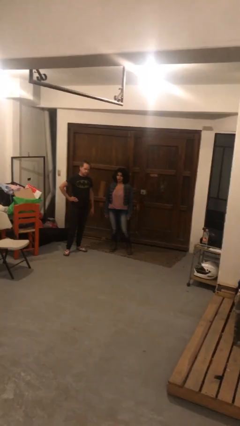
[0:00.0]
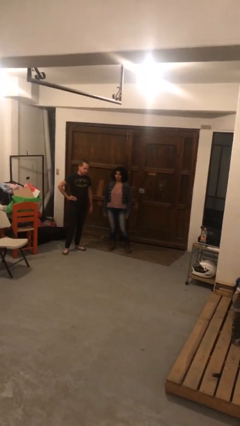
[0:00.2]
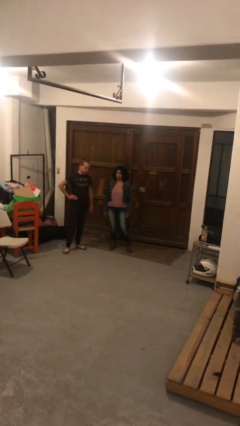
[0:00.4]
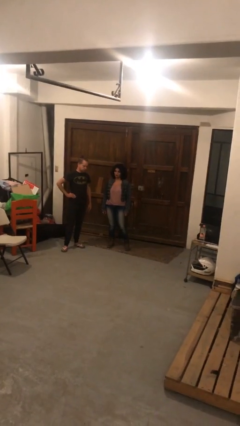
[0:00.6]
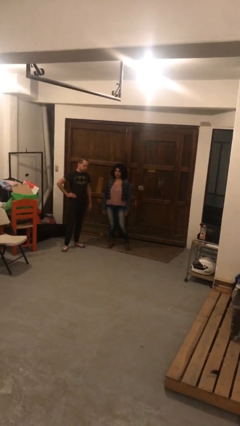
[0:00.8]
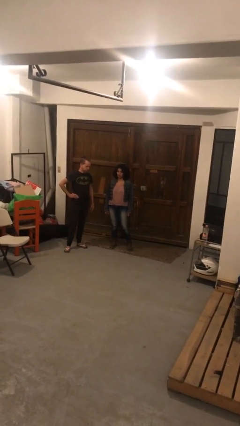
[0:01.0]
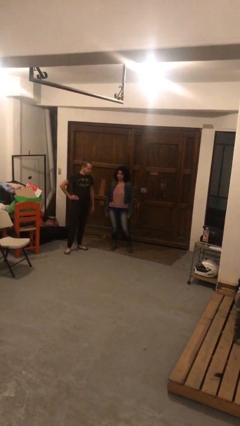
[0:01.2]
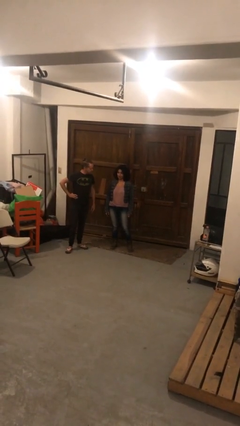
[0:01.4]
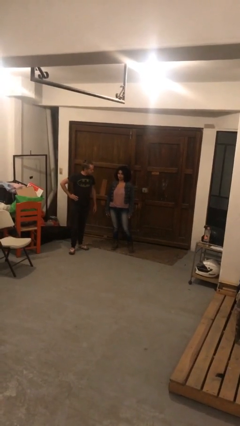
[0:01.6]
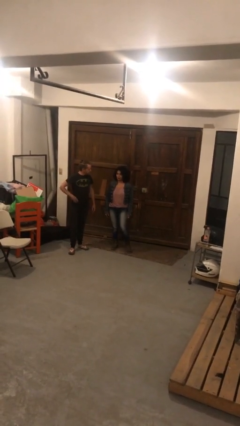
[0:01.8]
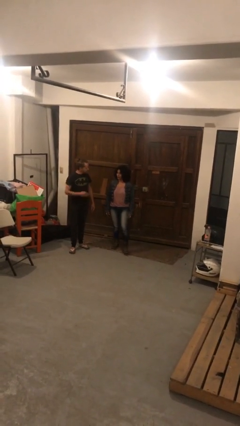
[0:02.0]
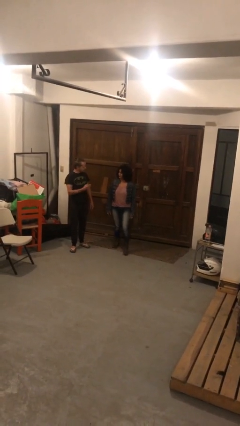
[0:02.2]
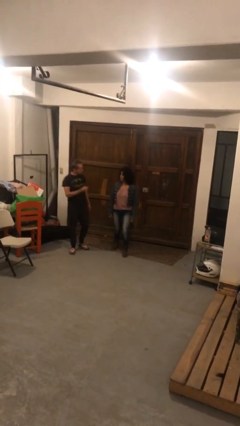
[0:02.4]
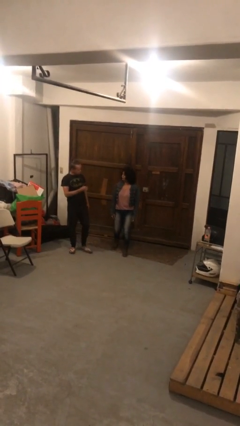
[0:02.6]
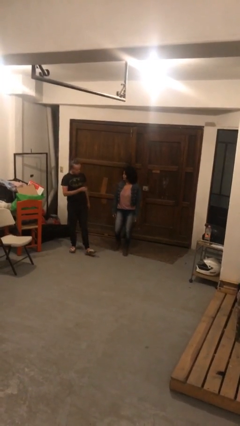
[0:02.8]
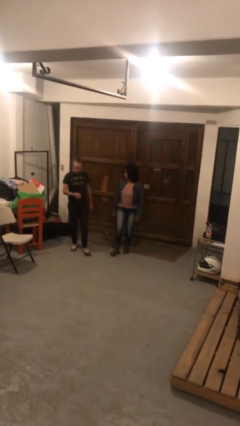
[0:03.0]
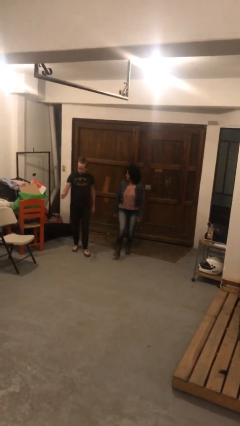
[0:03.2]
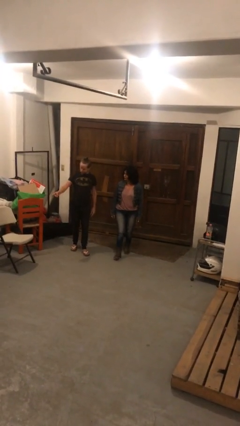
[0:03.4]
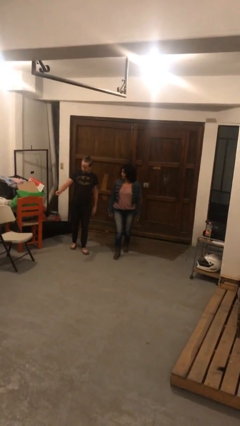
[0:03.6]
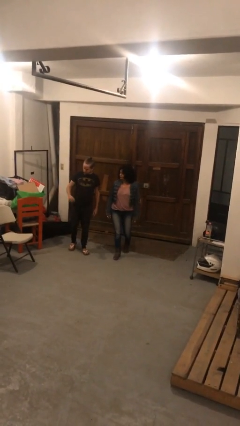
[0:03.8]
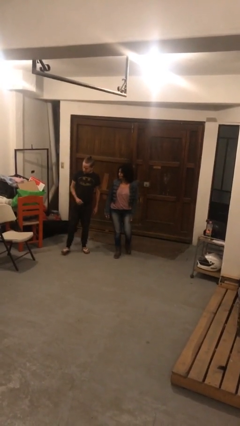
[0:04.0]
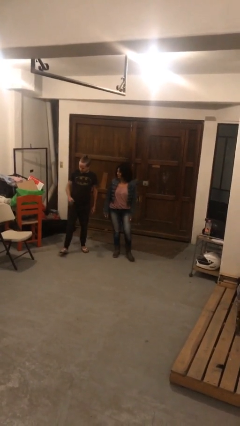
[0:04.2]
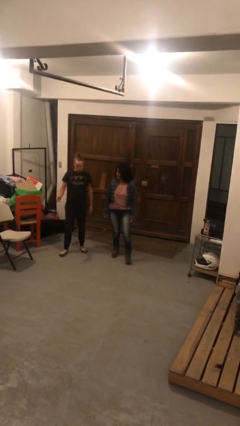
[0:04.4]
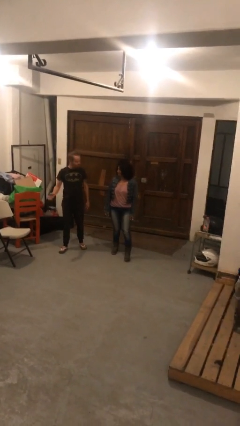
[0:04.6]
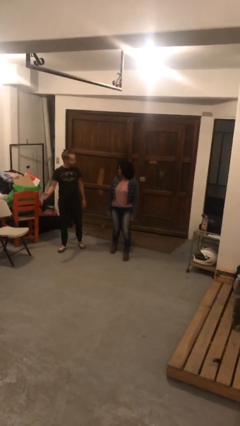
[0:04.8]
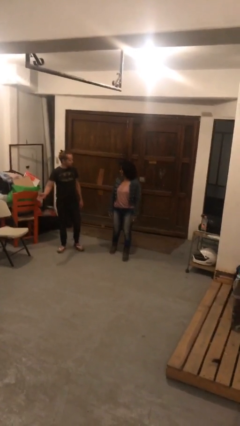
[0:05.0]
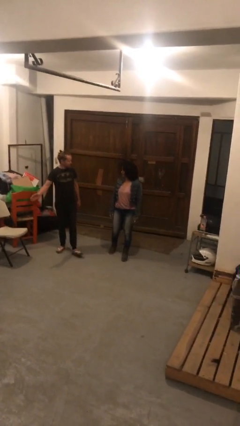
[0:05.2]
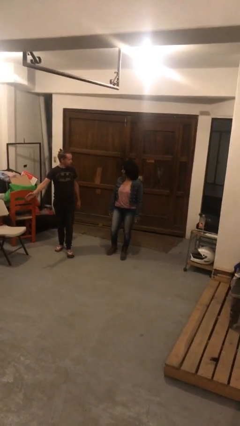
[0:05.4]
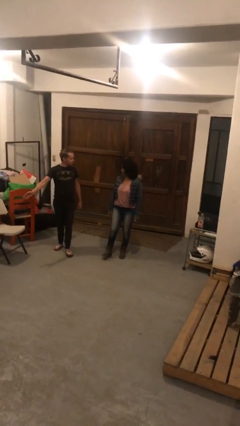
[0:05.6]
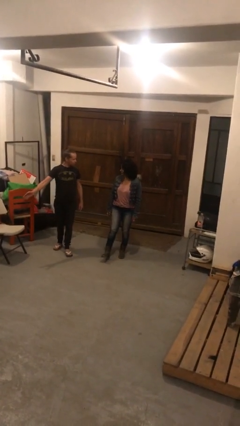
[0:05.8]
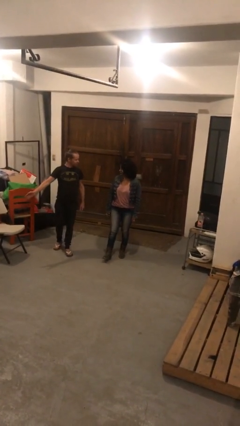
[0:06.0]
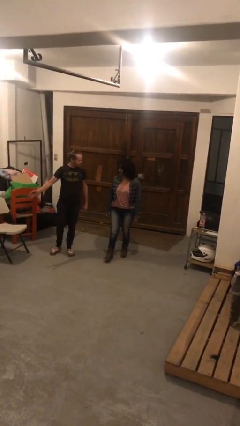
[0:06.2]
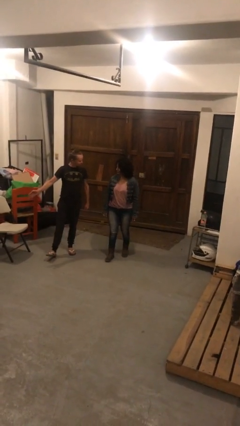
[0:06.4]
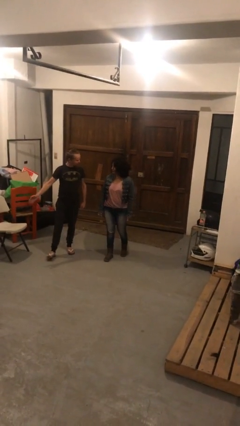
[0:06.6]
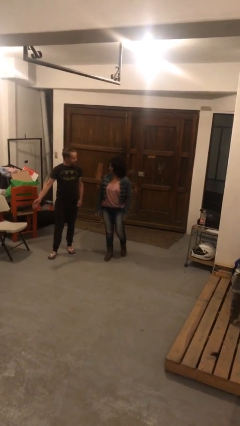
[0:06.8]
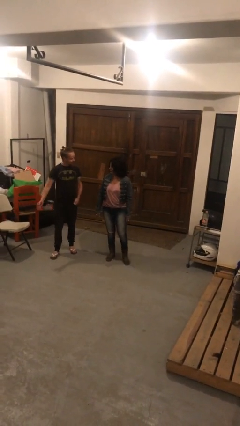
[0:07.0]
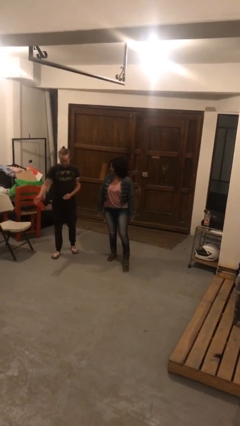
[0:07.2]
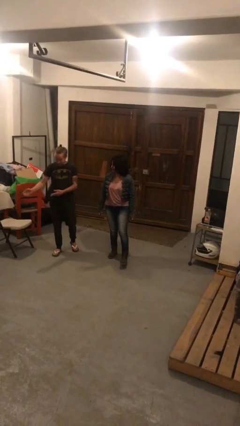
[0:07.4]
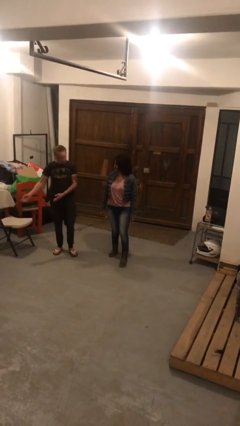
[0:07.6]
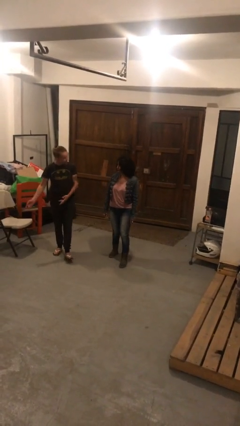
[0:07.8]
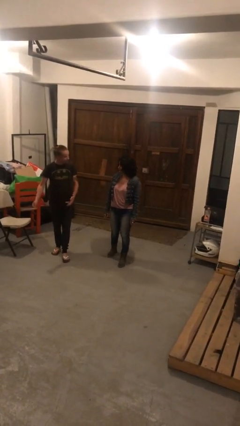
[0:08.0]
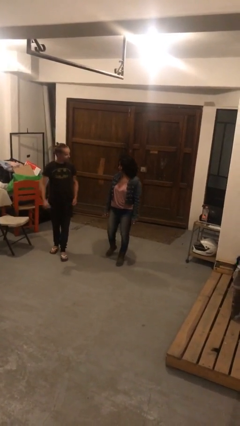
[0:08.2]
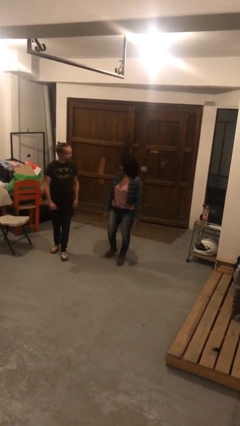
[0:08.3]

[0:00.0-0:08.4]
person talks to person

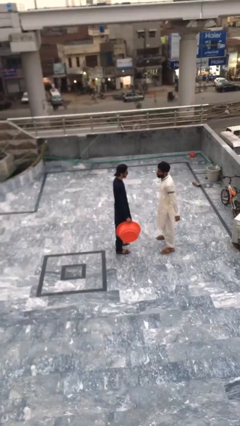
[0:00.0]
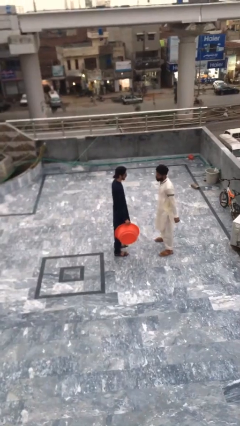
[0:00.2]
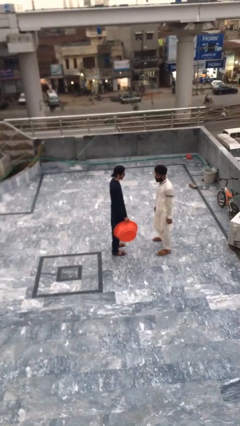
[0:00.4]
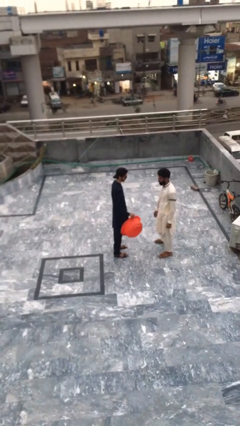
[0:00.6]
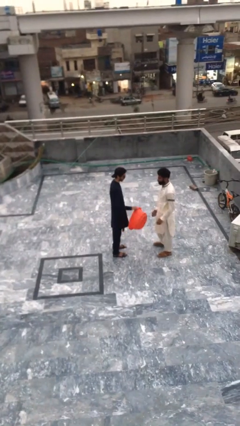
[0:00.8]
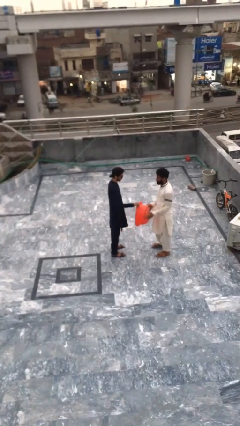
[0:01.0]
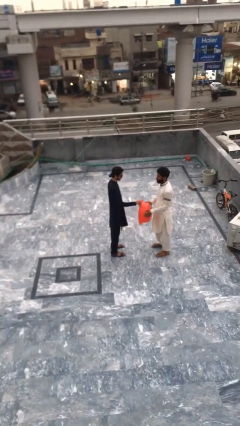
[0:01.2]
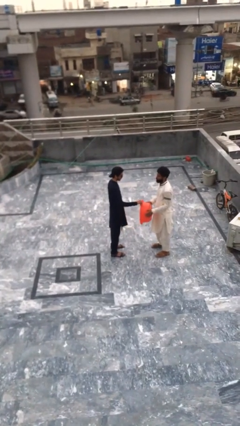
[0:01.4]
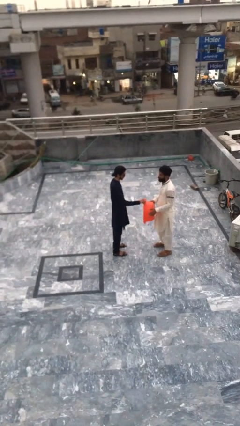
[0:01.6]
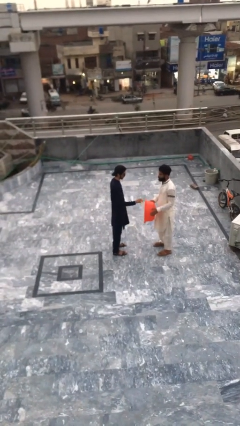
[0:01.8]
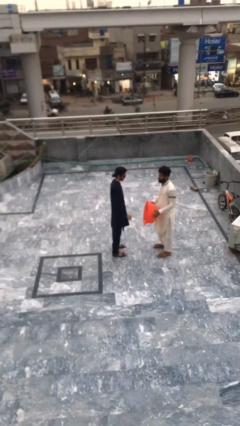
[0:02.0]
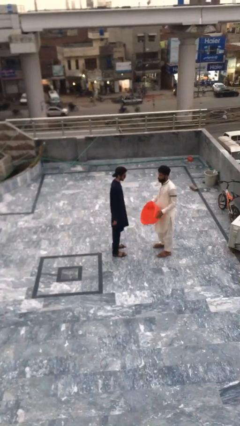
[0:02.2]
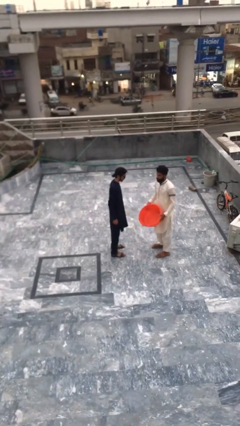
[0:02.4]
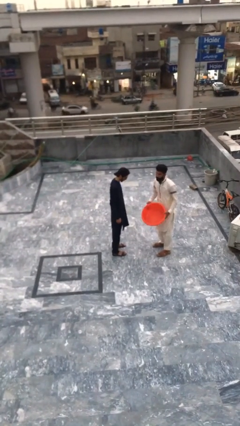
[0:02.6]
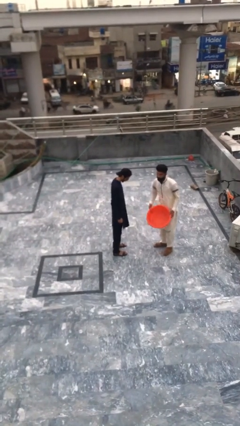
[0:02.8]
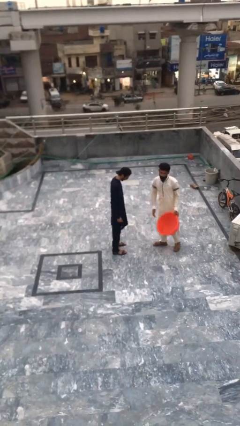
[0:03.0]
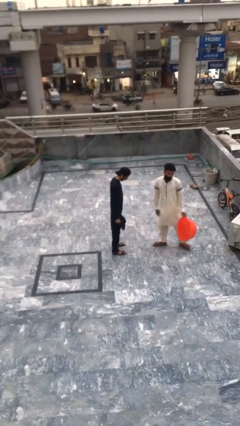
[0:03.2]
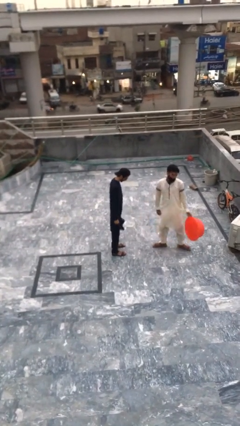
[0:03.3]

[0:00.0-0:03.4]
person transfers object to person

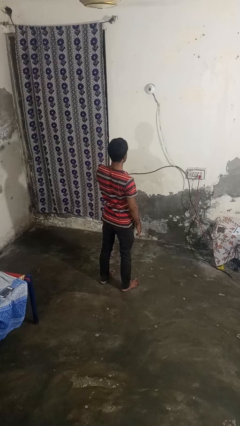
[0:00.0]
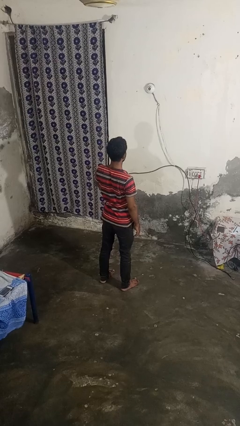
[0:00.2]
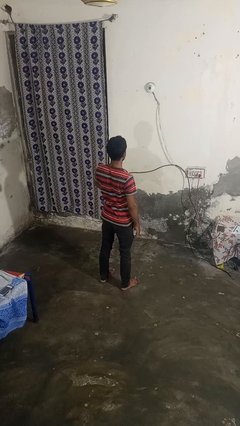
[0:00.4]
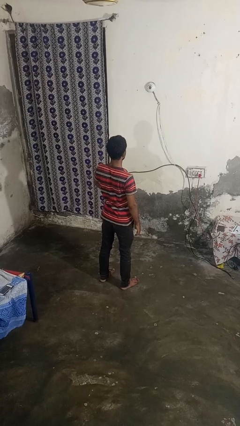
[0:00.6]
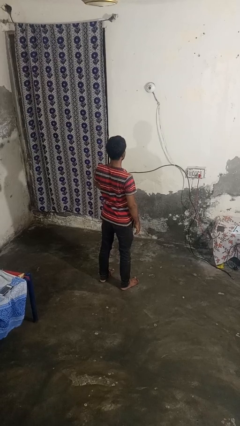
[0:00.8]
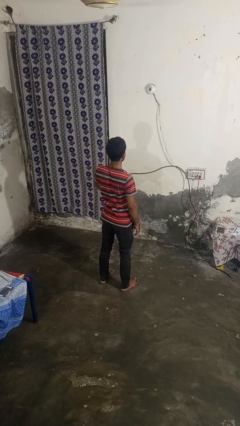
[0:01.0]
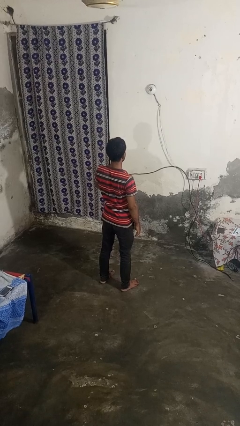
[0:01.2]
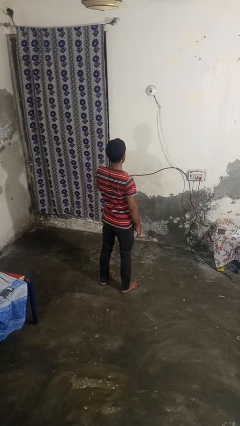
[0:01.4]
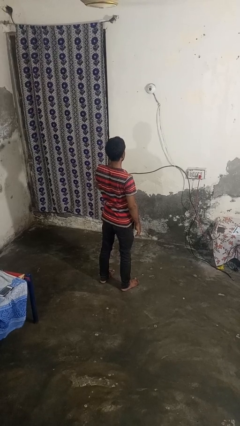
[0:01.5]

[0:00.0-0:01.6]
person gestures swipe down

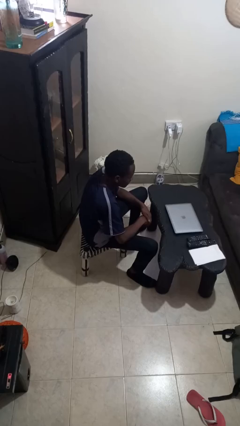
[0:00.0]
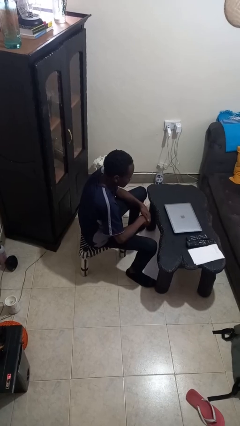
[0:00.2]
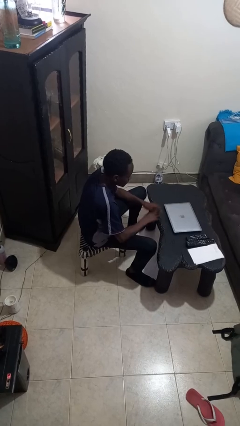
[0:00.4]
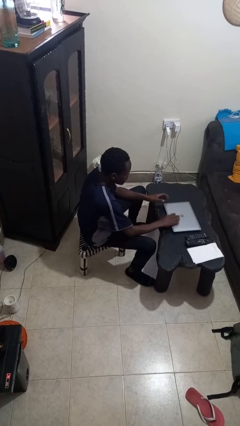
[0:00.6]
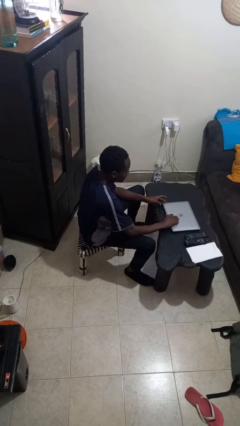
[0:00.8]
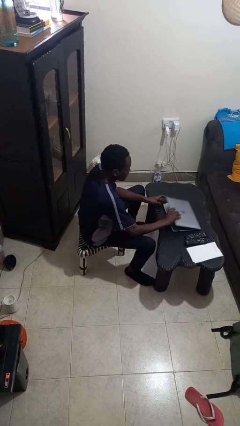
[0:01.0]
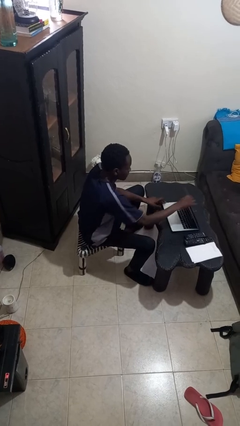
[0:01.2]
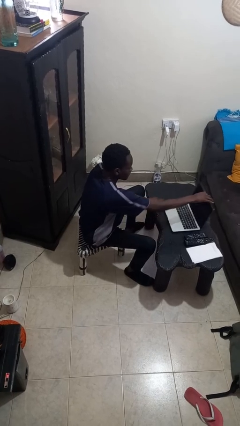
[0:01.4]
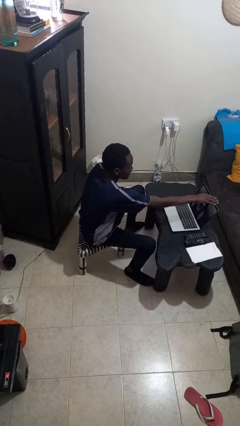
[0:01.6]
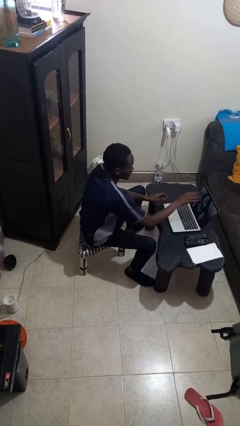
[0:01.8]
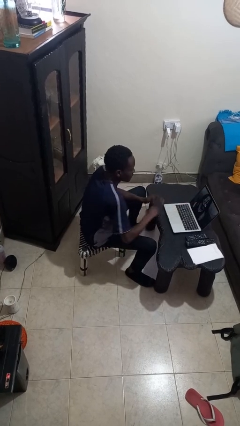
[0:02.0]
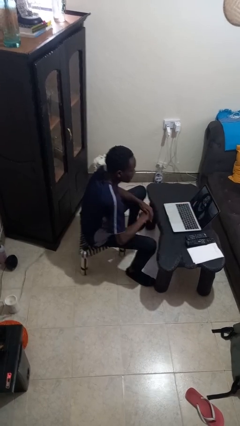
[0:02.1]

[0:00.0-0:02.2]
person opens laptop

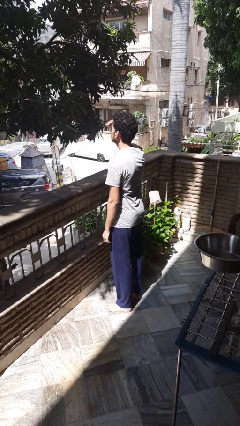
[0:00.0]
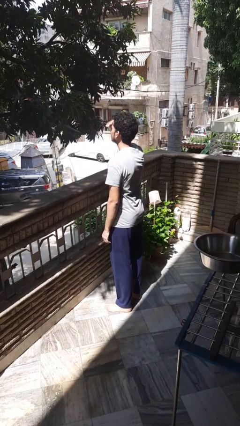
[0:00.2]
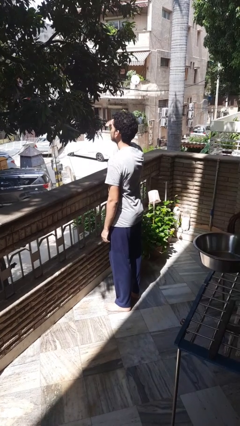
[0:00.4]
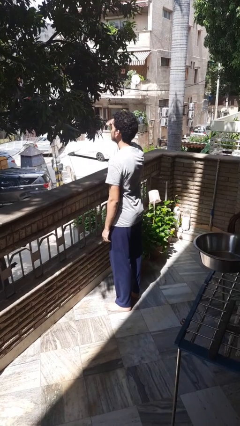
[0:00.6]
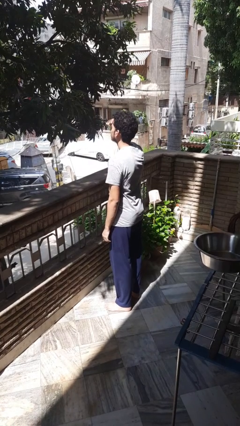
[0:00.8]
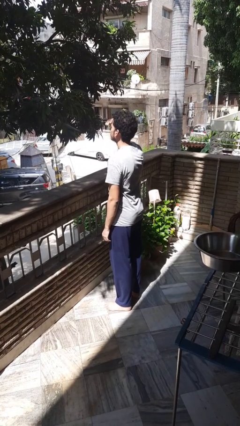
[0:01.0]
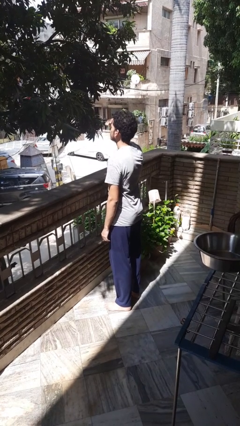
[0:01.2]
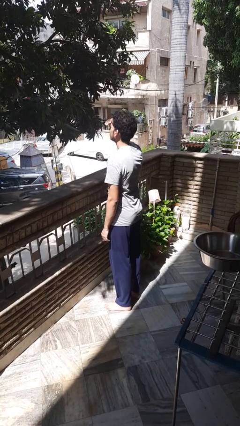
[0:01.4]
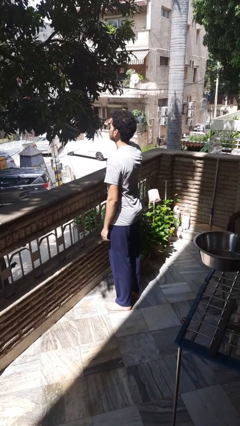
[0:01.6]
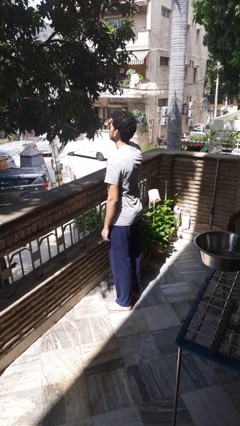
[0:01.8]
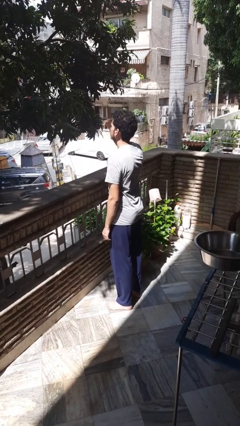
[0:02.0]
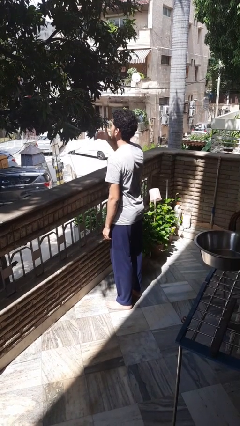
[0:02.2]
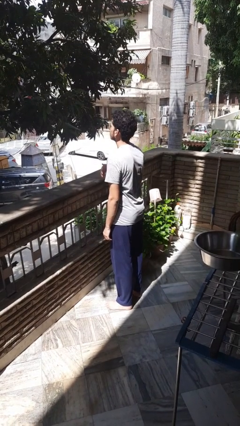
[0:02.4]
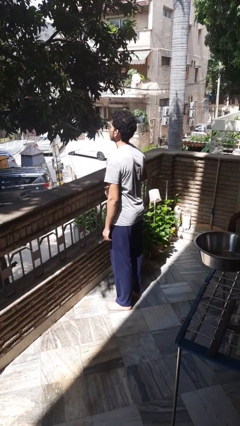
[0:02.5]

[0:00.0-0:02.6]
person shades eyes
